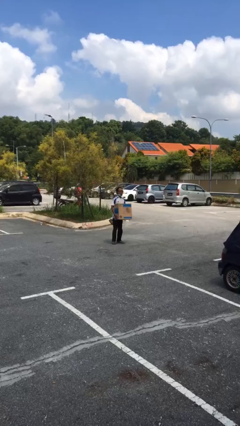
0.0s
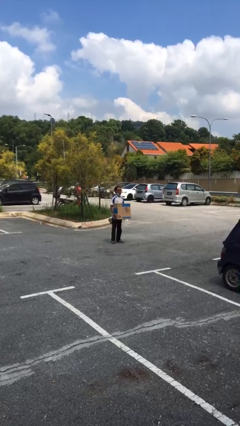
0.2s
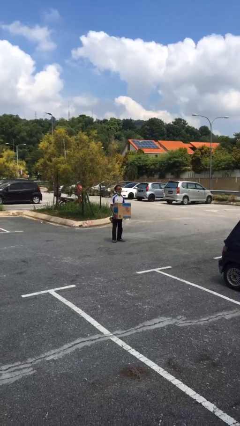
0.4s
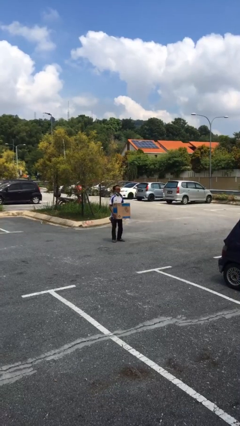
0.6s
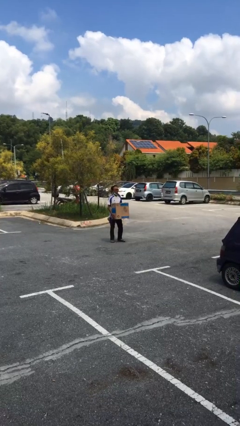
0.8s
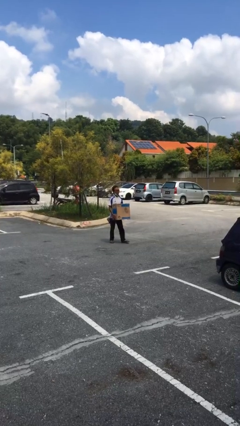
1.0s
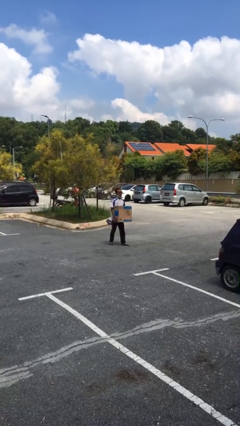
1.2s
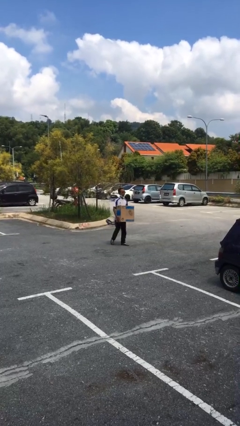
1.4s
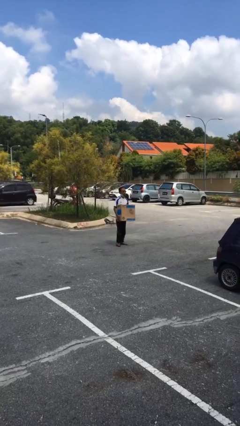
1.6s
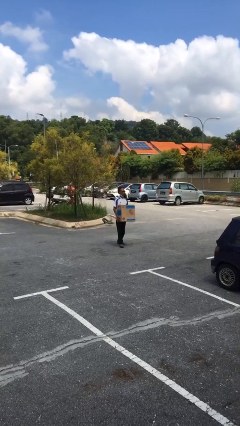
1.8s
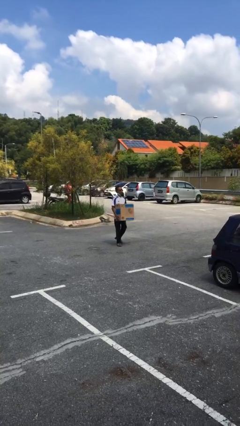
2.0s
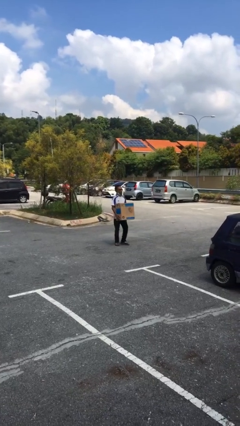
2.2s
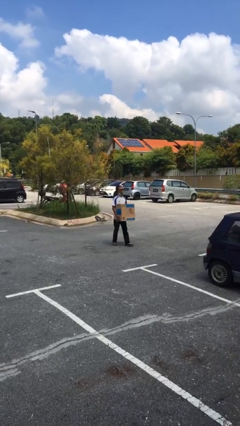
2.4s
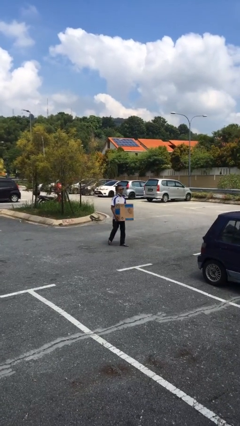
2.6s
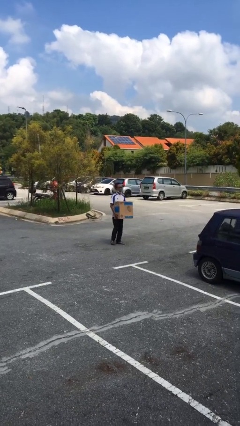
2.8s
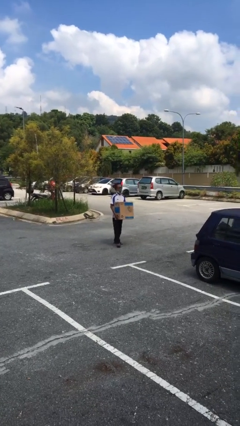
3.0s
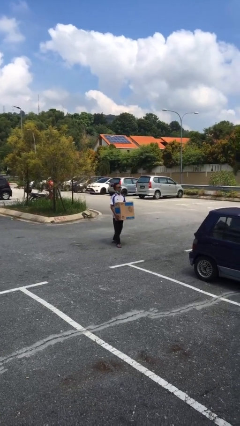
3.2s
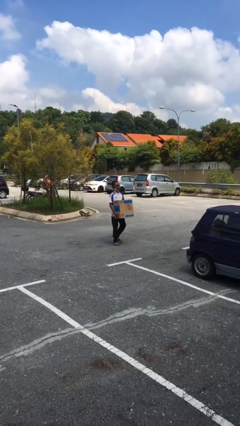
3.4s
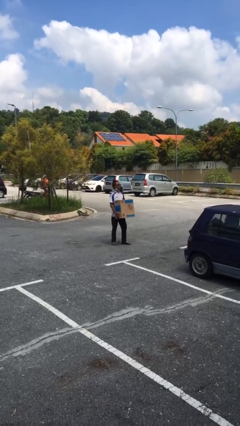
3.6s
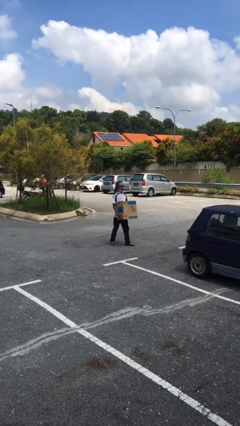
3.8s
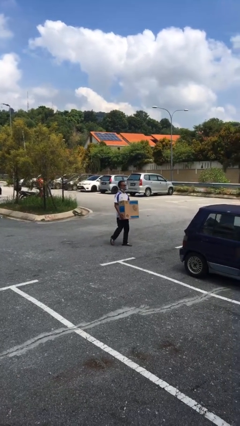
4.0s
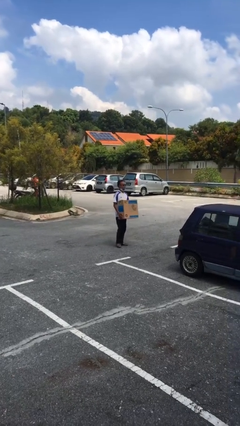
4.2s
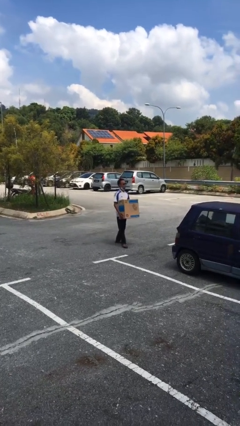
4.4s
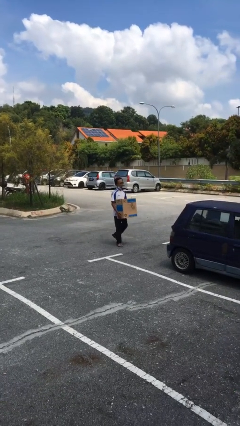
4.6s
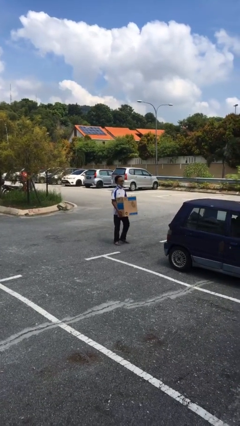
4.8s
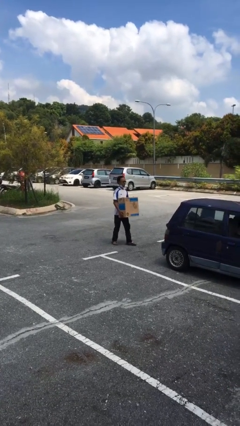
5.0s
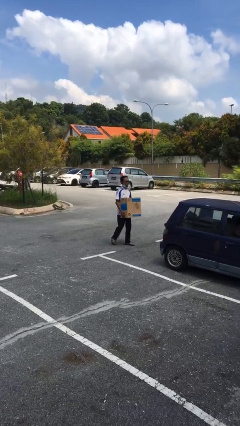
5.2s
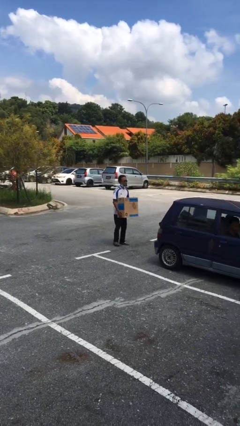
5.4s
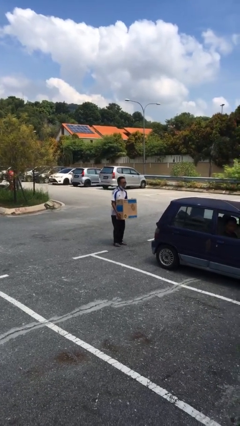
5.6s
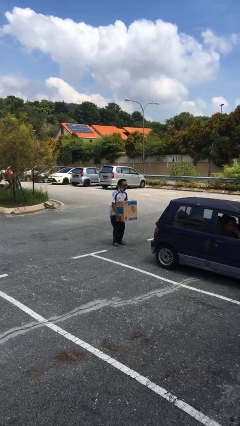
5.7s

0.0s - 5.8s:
person carries heavy object

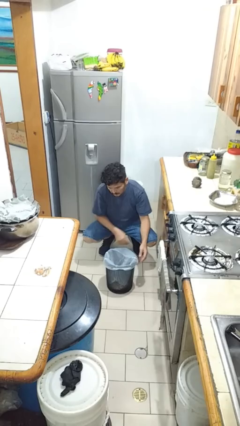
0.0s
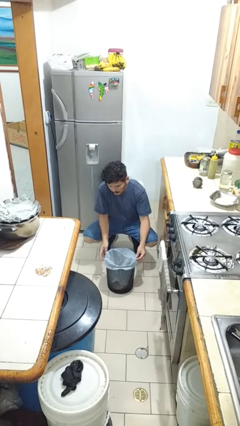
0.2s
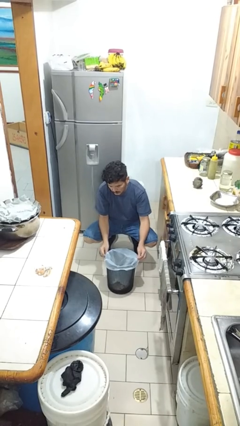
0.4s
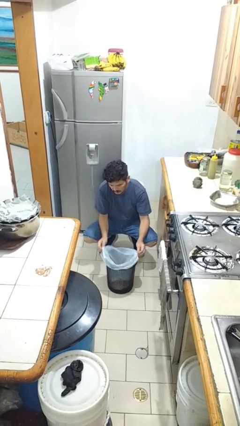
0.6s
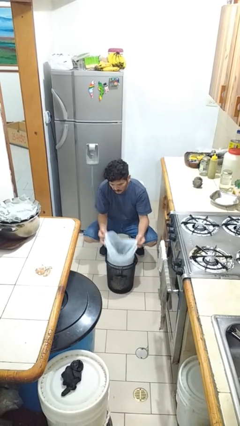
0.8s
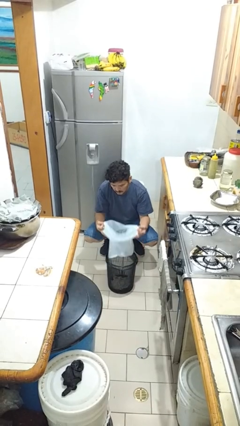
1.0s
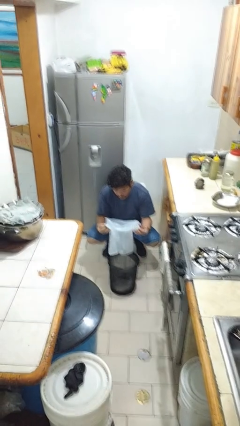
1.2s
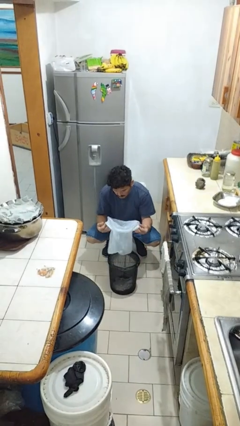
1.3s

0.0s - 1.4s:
person removes trashbag from trashcan

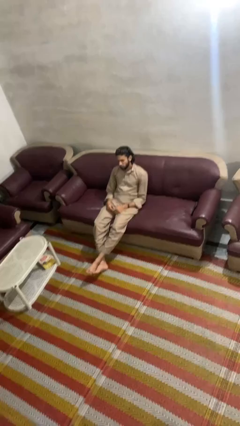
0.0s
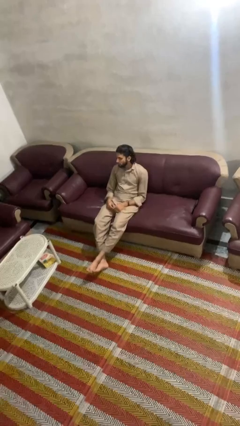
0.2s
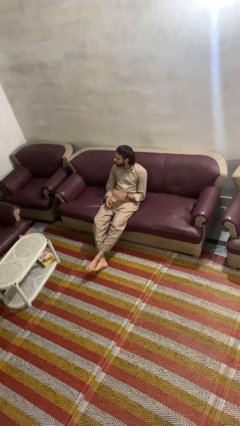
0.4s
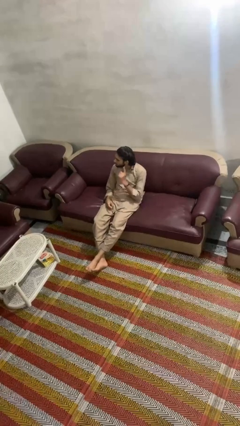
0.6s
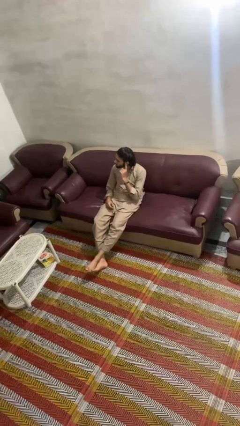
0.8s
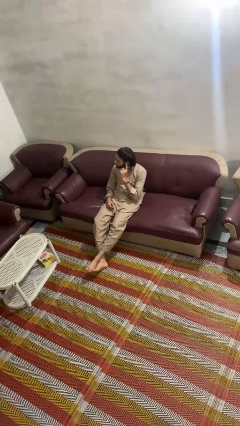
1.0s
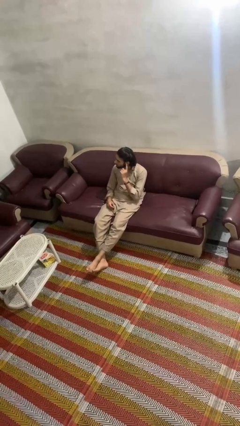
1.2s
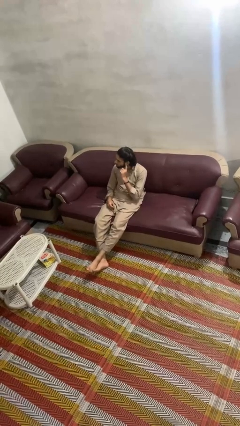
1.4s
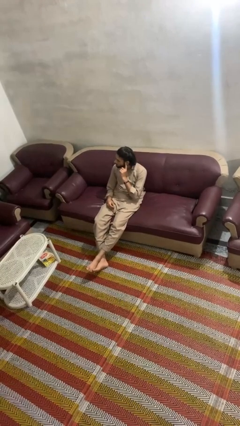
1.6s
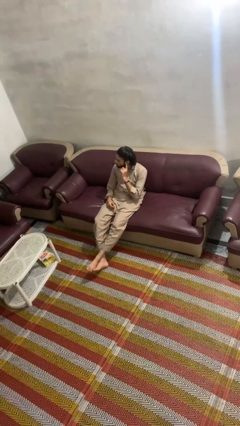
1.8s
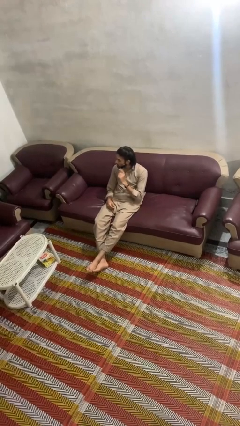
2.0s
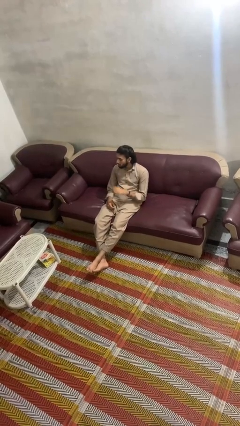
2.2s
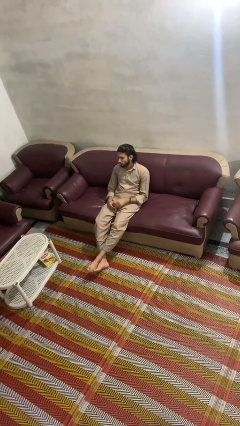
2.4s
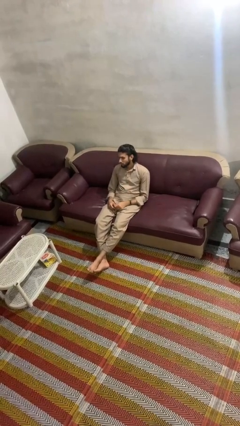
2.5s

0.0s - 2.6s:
person gestures listen closely

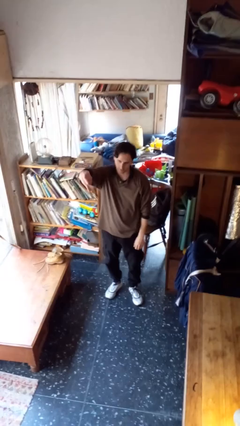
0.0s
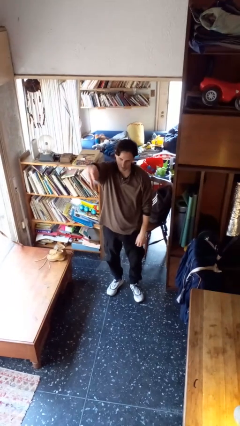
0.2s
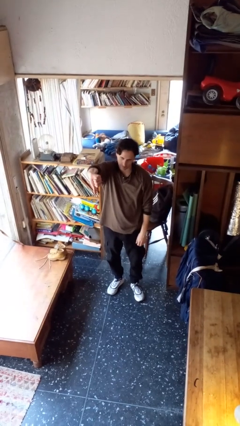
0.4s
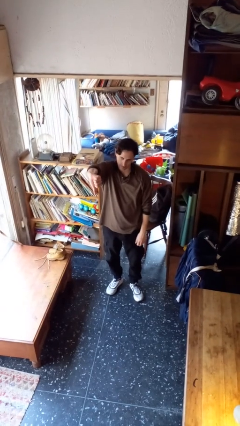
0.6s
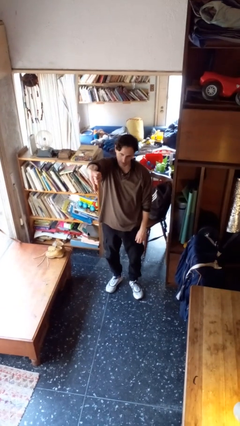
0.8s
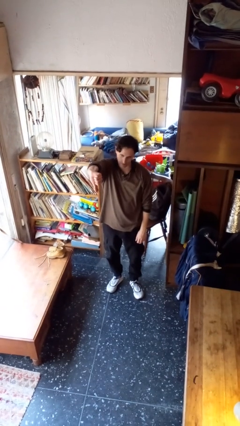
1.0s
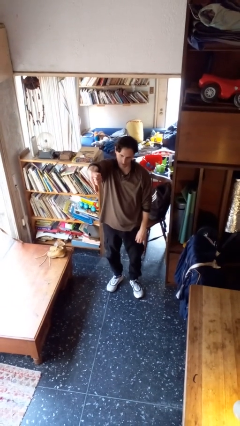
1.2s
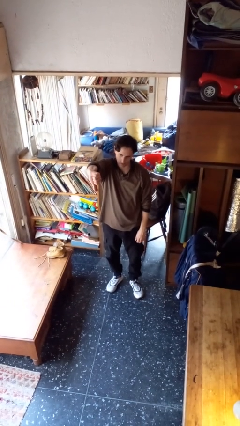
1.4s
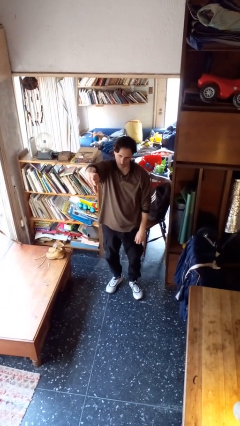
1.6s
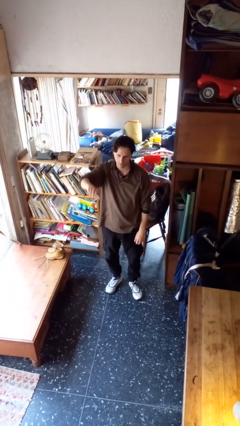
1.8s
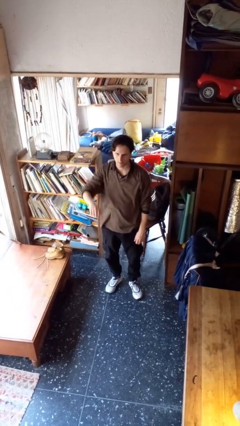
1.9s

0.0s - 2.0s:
person gestures thumbs down

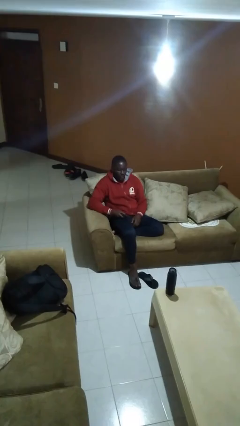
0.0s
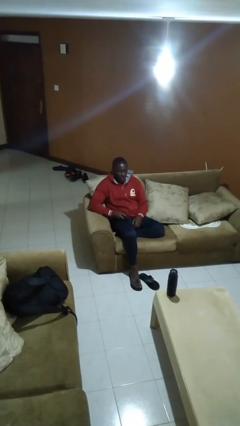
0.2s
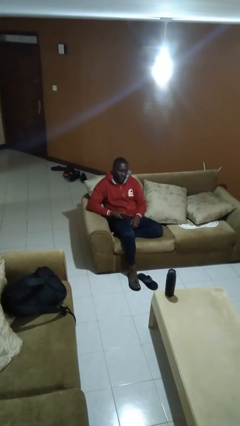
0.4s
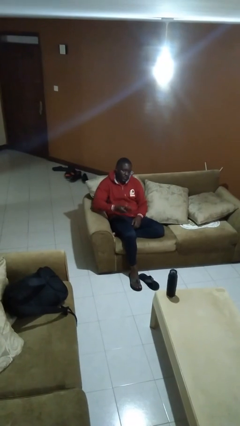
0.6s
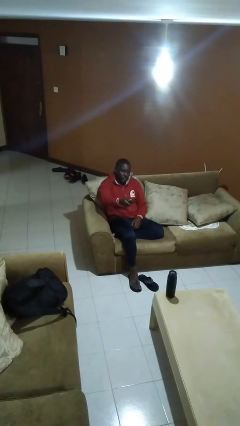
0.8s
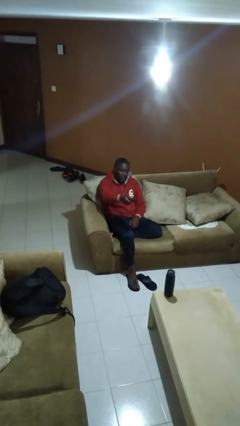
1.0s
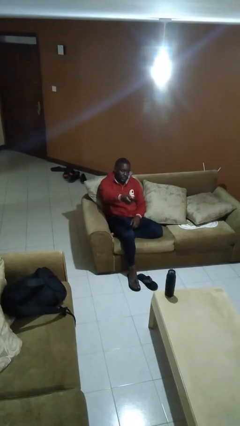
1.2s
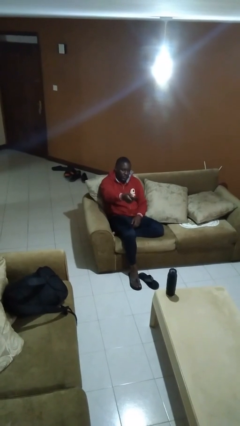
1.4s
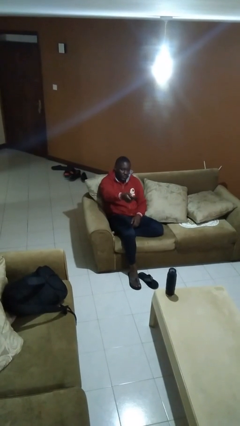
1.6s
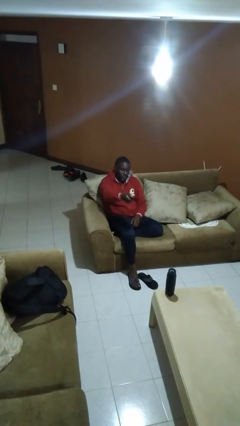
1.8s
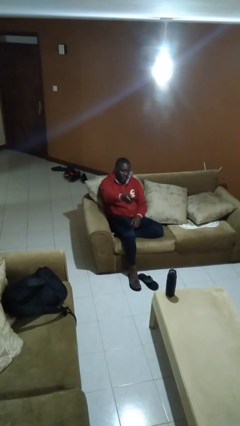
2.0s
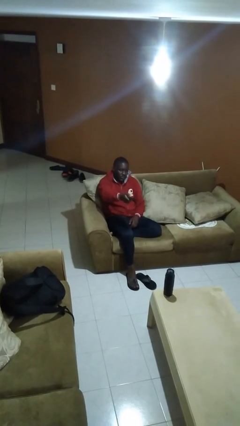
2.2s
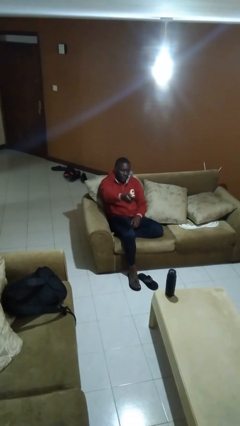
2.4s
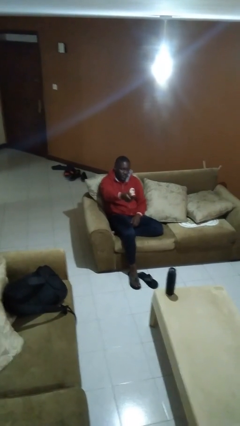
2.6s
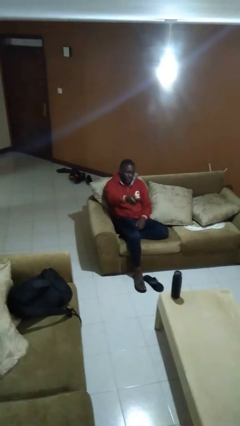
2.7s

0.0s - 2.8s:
person uses television remote

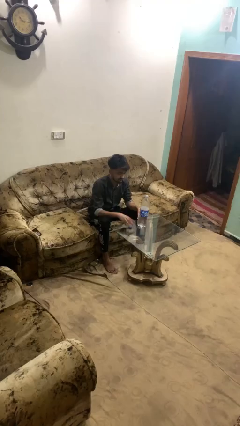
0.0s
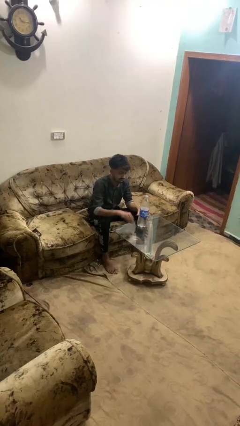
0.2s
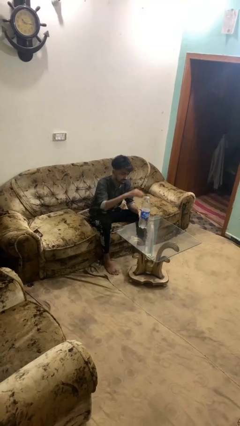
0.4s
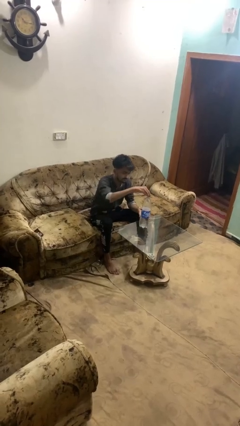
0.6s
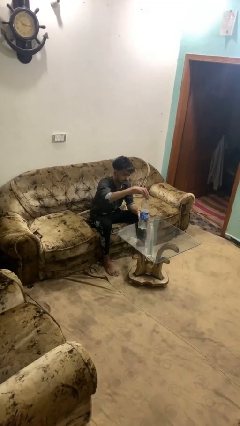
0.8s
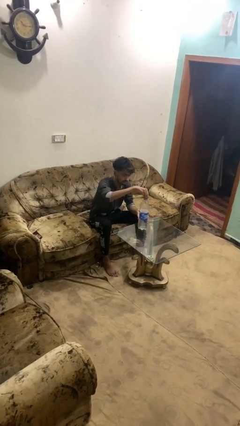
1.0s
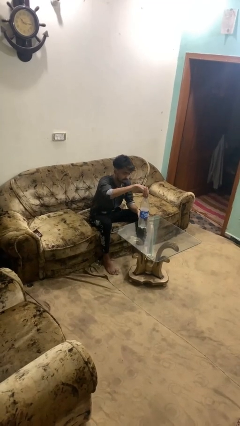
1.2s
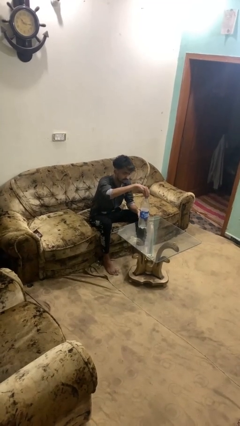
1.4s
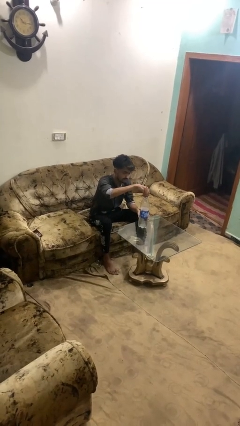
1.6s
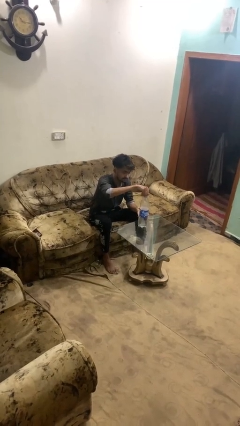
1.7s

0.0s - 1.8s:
person screws lid to bottle

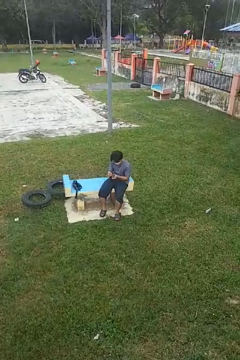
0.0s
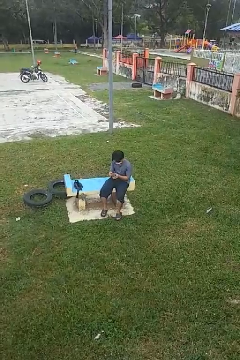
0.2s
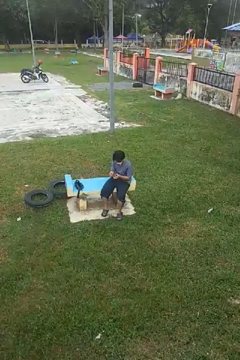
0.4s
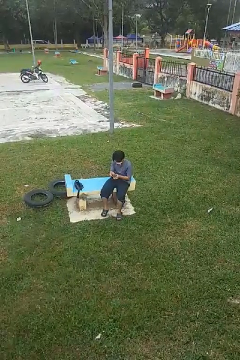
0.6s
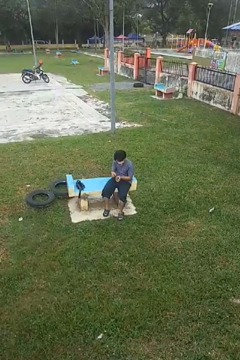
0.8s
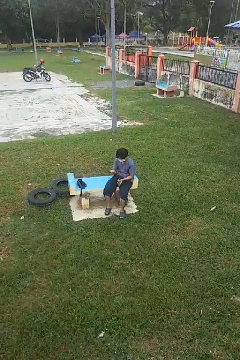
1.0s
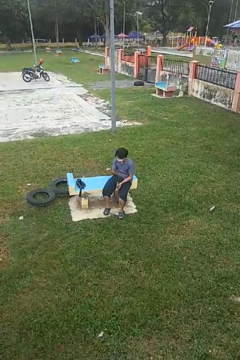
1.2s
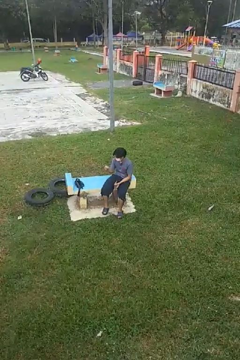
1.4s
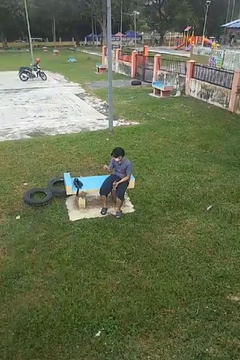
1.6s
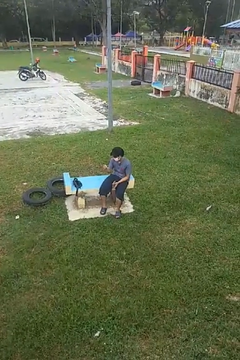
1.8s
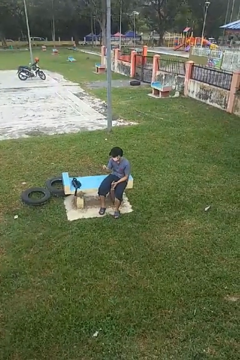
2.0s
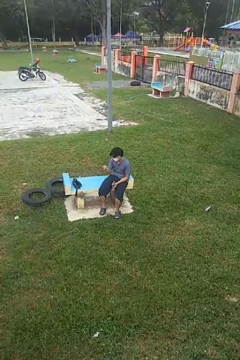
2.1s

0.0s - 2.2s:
person takes object from purse
